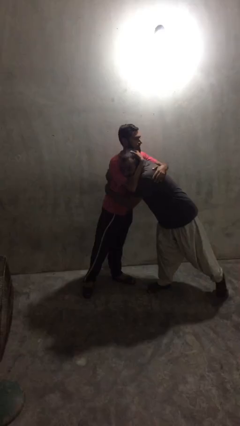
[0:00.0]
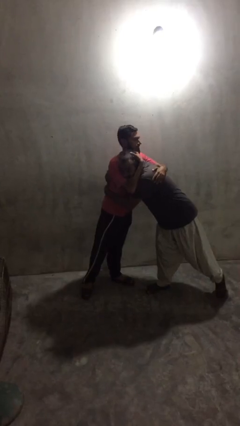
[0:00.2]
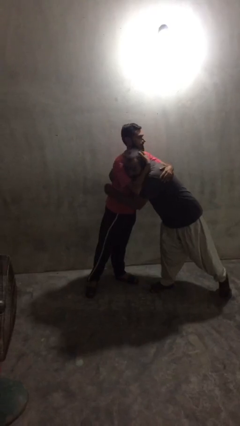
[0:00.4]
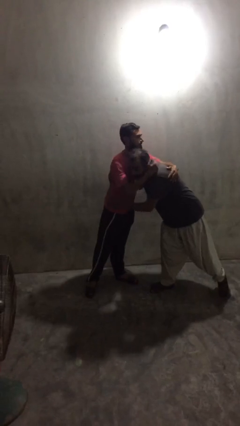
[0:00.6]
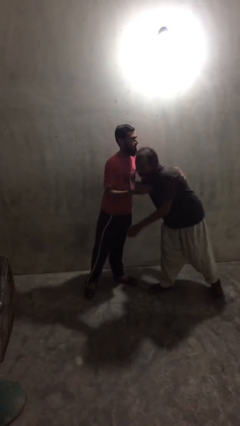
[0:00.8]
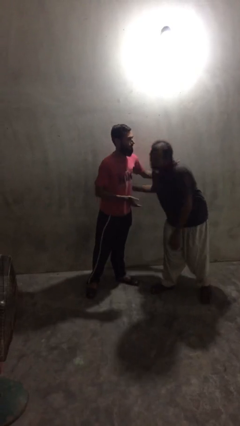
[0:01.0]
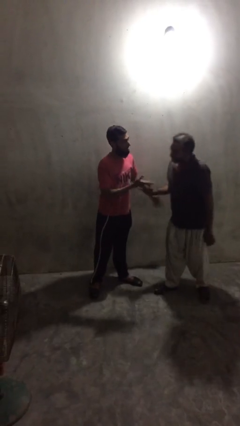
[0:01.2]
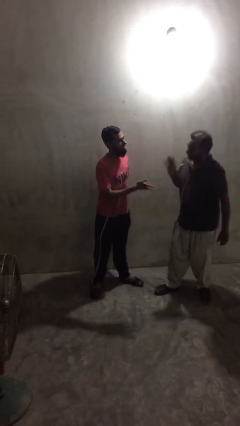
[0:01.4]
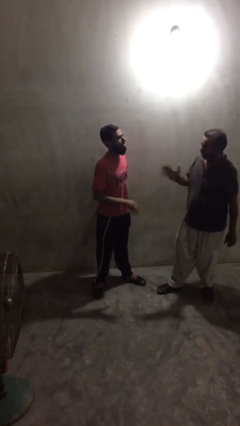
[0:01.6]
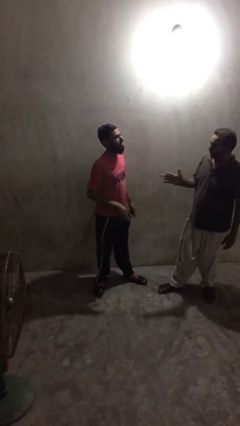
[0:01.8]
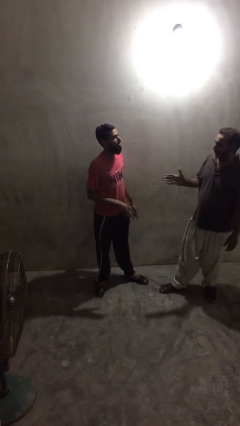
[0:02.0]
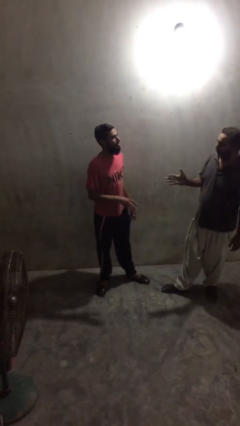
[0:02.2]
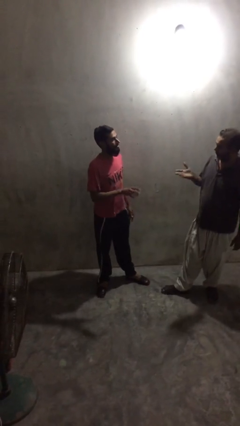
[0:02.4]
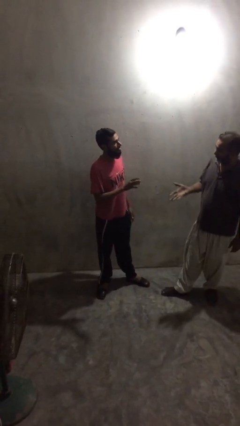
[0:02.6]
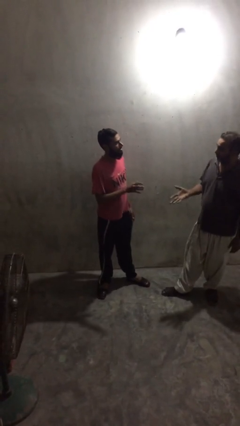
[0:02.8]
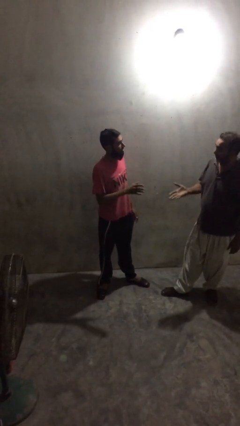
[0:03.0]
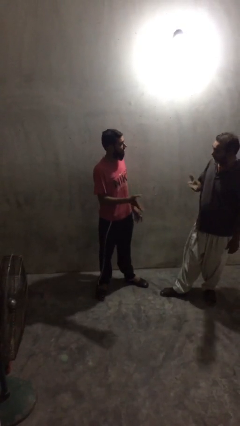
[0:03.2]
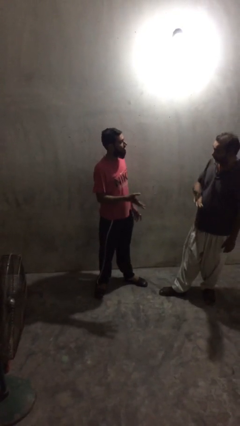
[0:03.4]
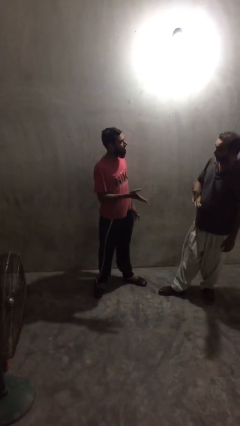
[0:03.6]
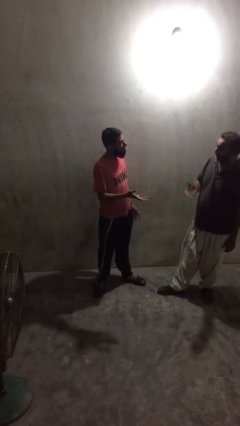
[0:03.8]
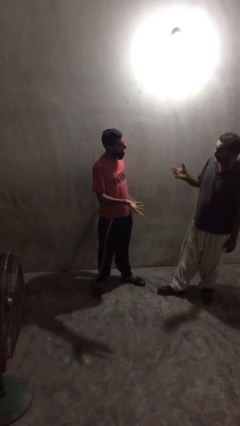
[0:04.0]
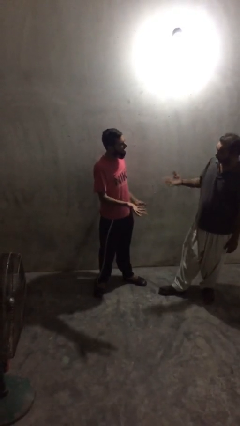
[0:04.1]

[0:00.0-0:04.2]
person talks to person

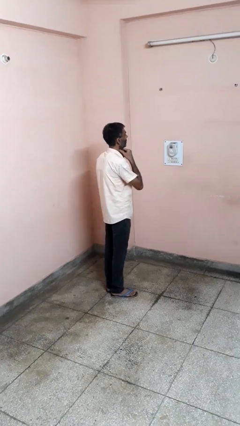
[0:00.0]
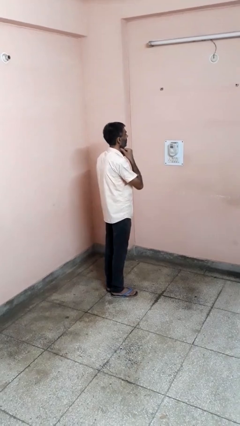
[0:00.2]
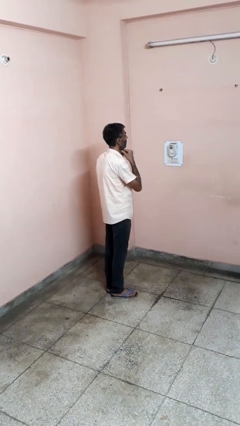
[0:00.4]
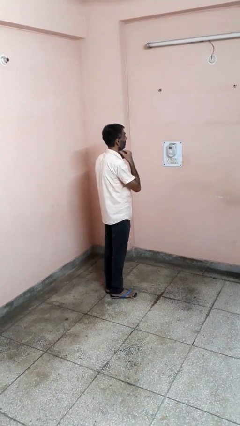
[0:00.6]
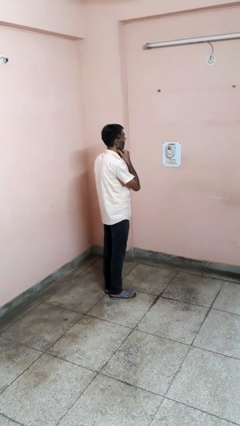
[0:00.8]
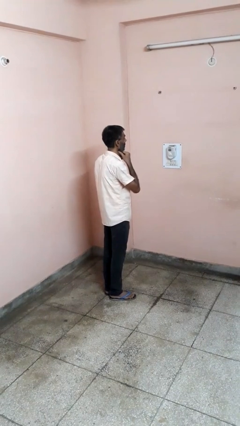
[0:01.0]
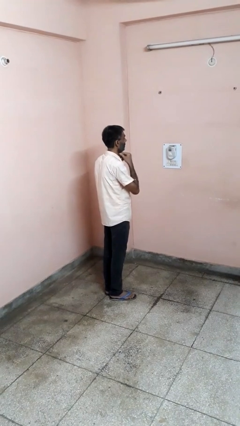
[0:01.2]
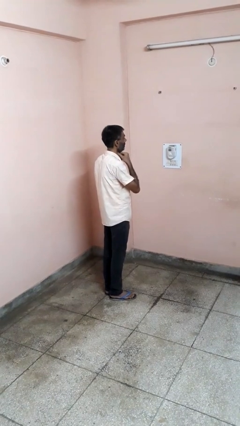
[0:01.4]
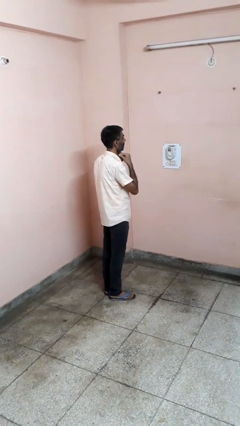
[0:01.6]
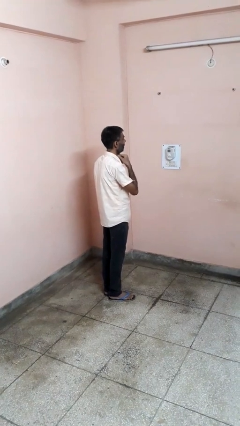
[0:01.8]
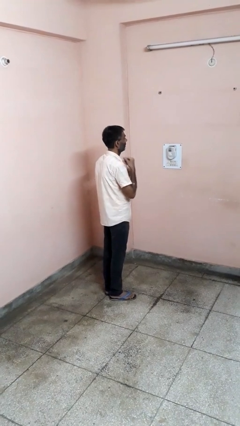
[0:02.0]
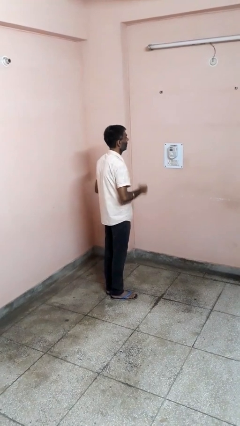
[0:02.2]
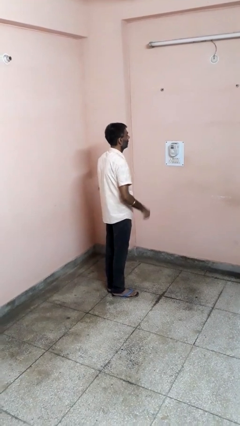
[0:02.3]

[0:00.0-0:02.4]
person rubs neck

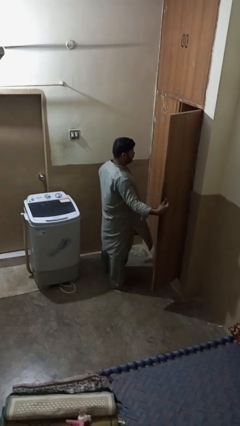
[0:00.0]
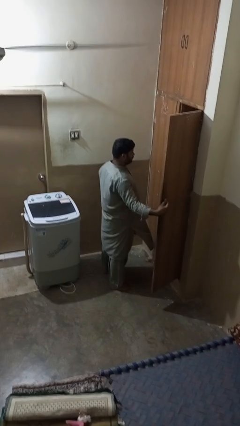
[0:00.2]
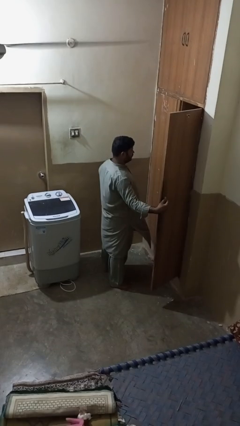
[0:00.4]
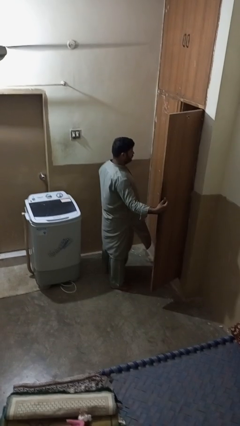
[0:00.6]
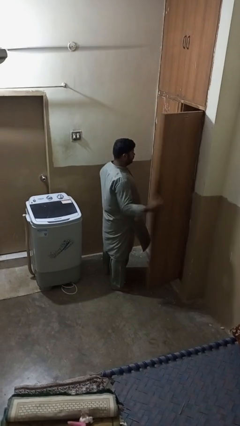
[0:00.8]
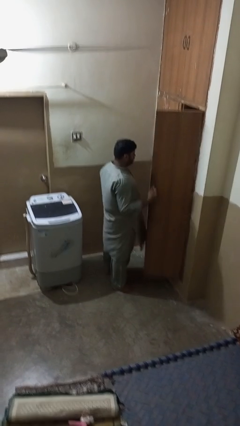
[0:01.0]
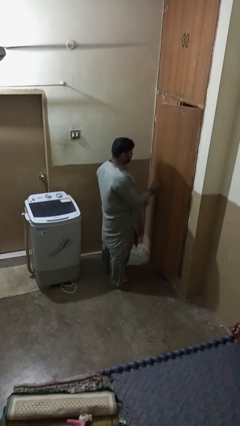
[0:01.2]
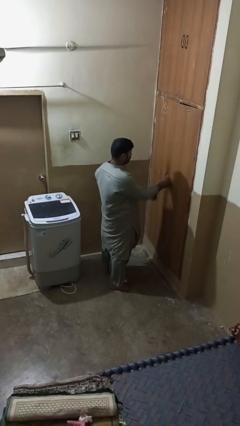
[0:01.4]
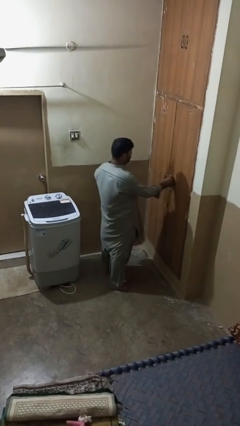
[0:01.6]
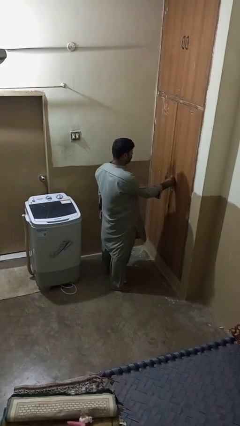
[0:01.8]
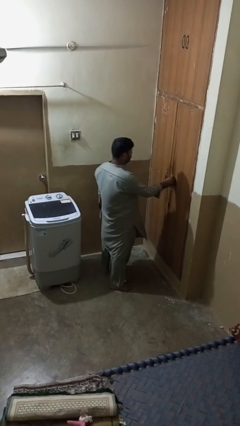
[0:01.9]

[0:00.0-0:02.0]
person closes closet door

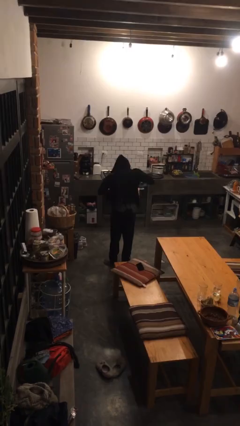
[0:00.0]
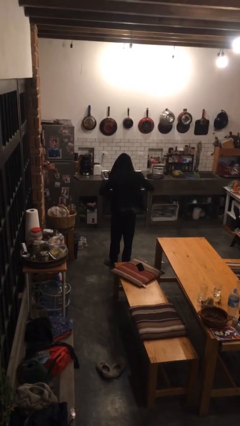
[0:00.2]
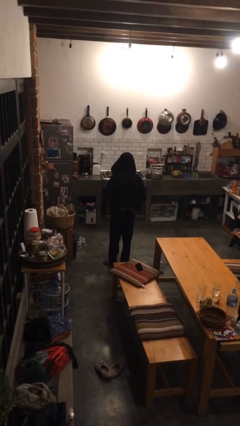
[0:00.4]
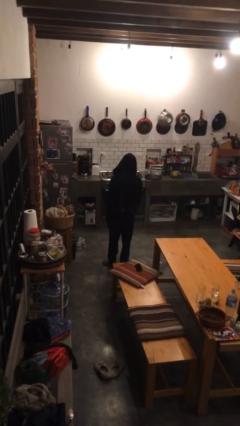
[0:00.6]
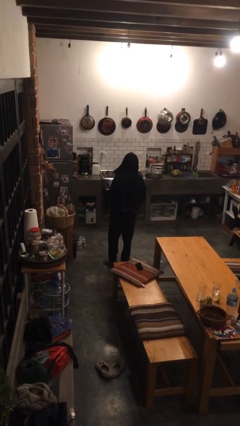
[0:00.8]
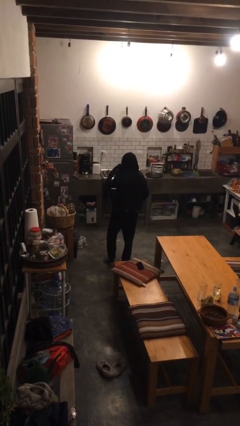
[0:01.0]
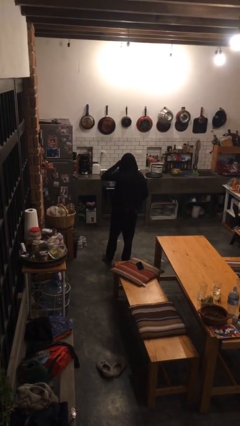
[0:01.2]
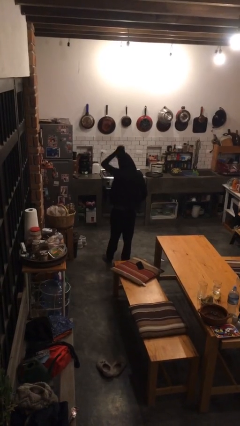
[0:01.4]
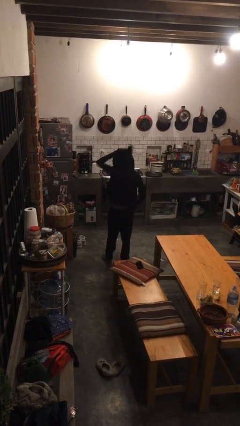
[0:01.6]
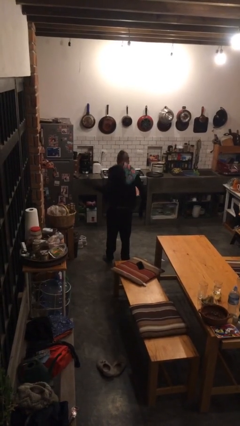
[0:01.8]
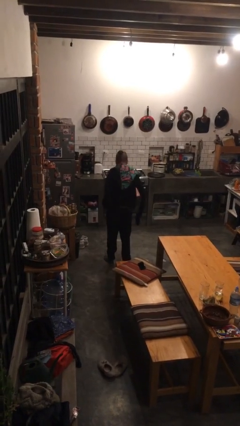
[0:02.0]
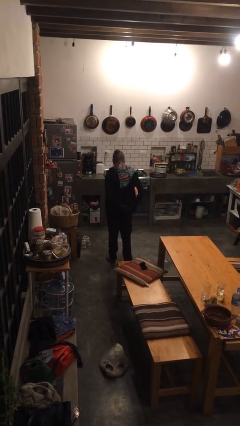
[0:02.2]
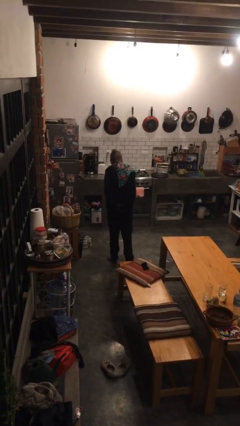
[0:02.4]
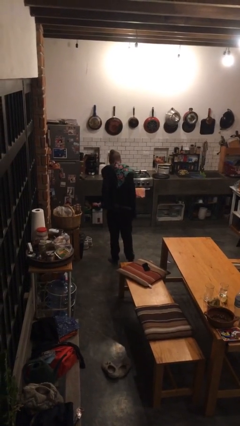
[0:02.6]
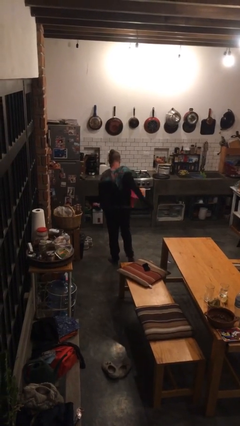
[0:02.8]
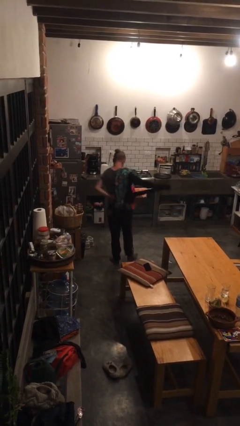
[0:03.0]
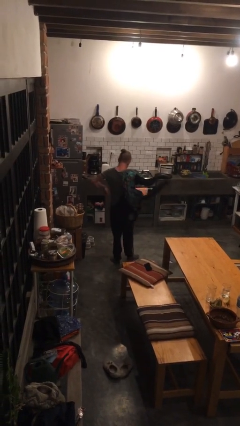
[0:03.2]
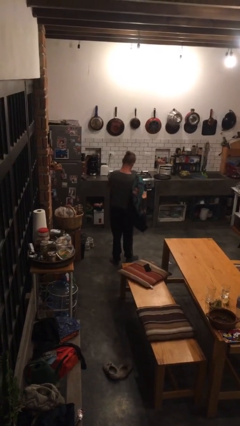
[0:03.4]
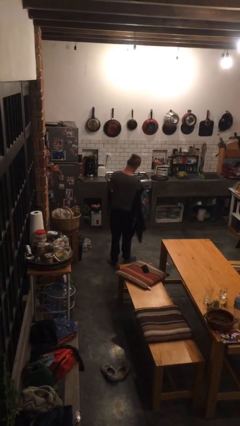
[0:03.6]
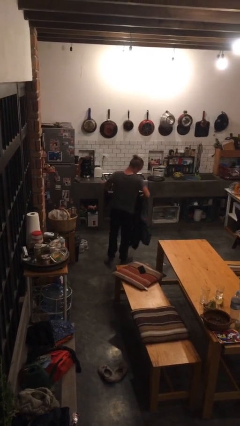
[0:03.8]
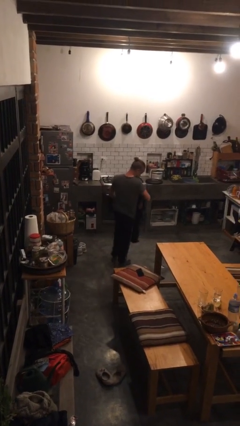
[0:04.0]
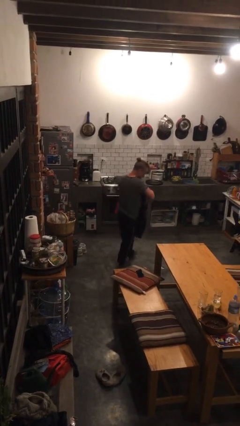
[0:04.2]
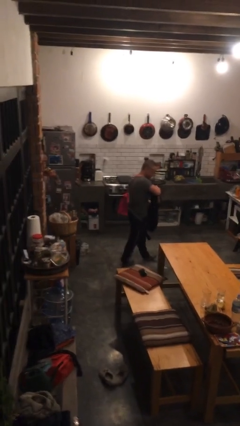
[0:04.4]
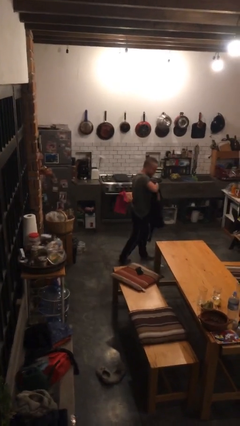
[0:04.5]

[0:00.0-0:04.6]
person takes off hoodie

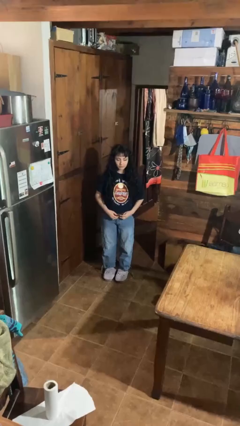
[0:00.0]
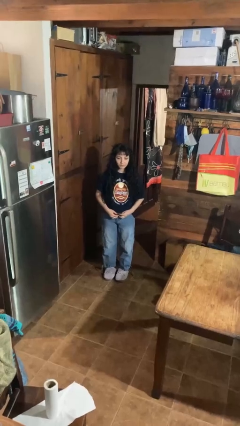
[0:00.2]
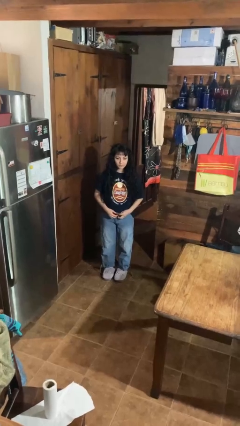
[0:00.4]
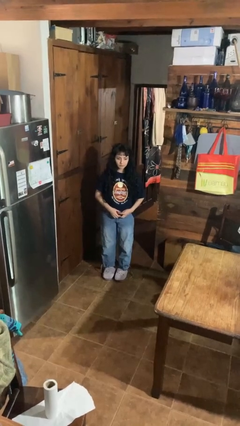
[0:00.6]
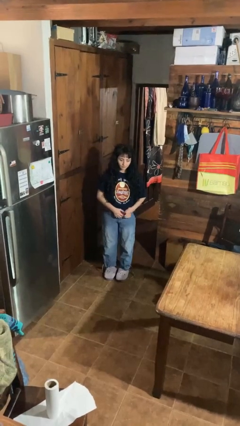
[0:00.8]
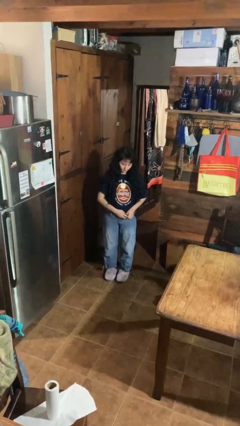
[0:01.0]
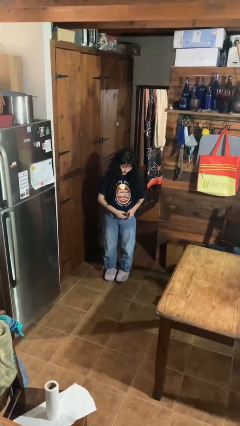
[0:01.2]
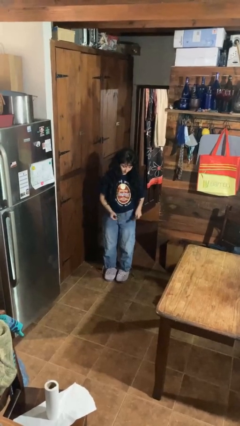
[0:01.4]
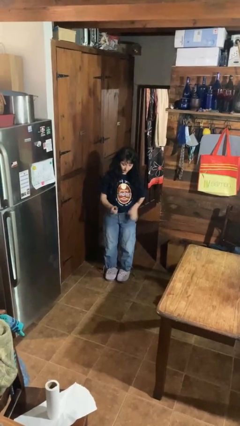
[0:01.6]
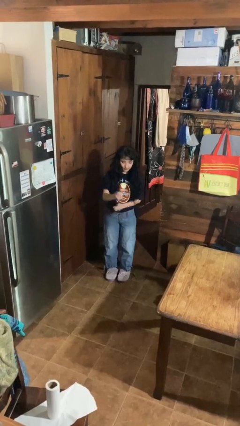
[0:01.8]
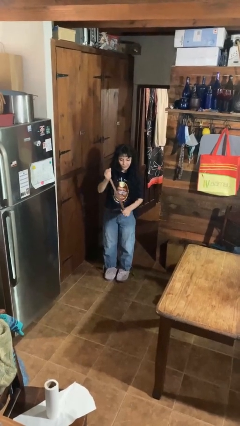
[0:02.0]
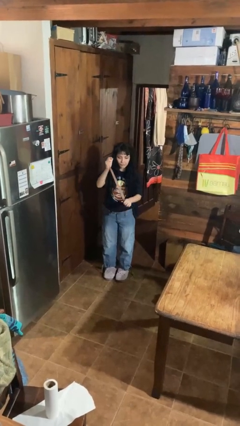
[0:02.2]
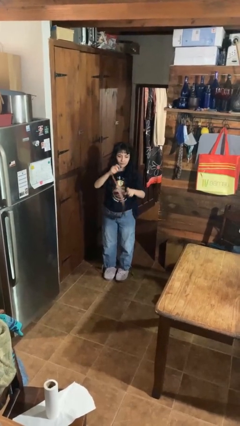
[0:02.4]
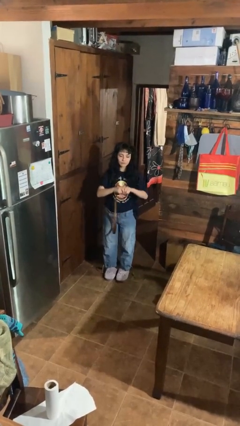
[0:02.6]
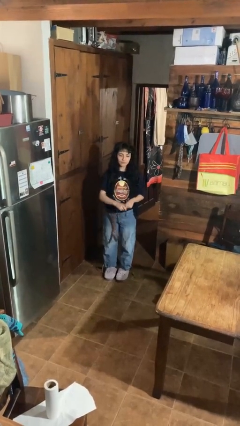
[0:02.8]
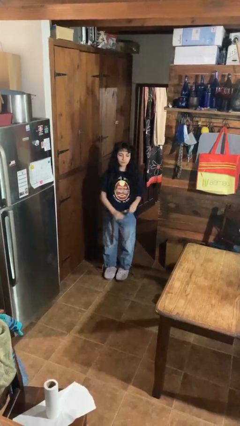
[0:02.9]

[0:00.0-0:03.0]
person takes off belt

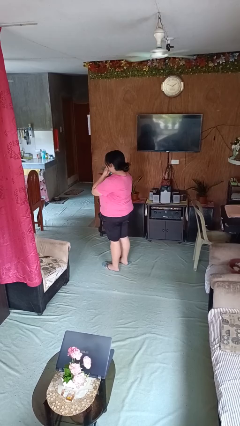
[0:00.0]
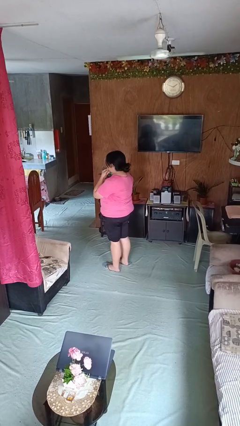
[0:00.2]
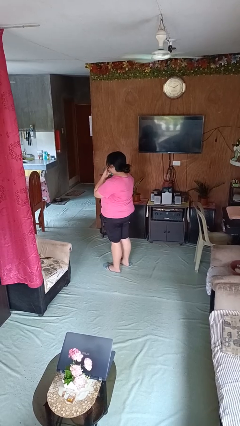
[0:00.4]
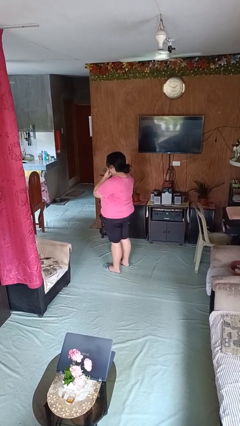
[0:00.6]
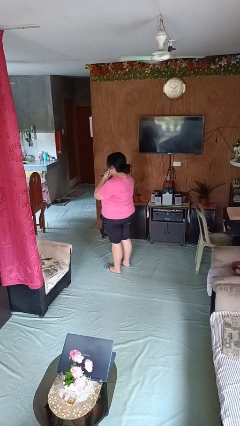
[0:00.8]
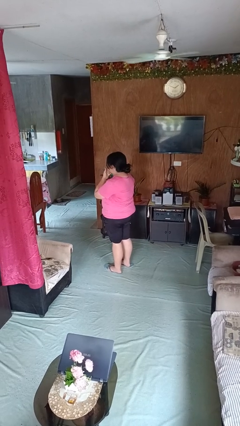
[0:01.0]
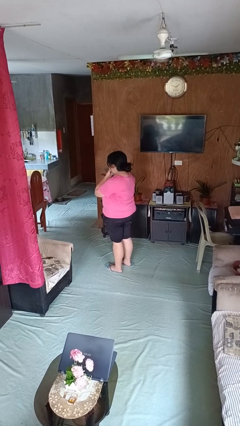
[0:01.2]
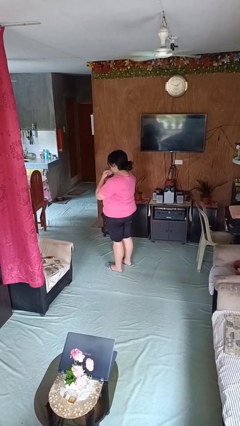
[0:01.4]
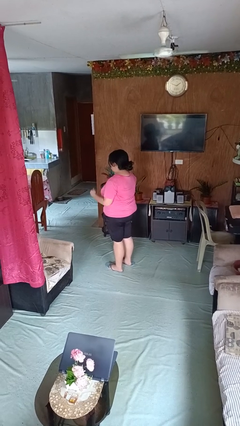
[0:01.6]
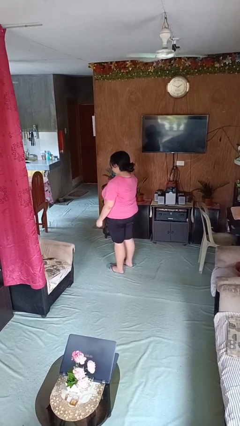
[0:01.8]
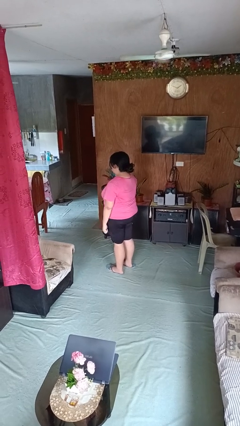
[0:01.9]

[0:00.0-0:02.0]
person strokes chin
